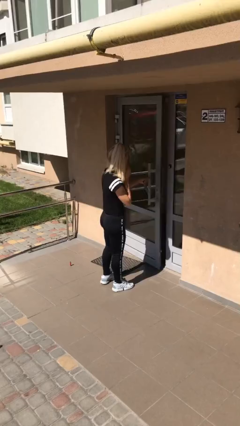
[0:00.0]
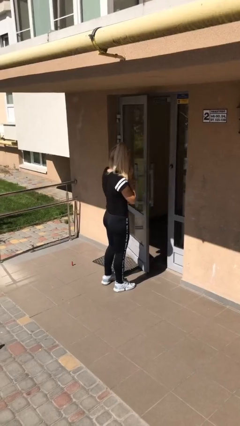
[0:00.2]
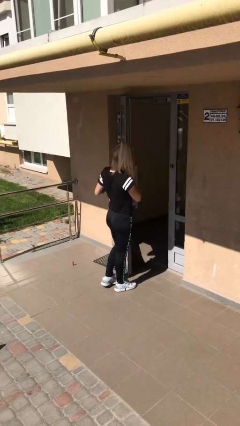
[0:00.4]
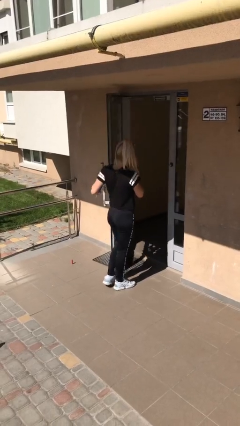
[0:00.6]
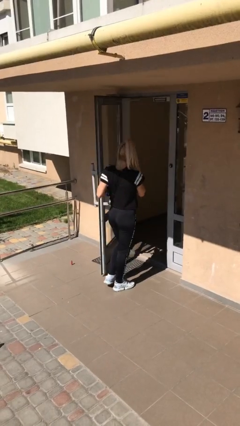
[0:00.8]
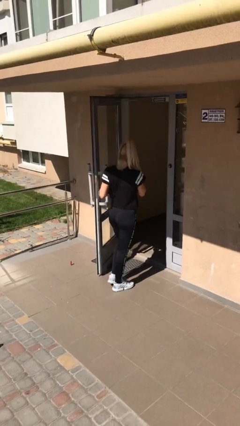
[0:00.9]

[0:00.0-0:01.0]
person opens facility door

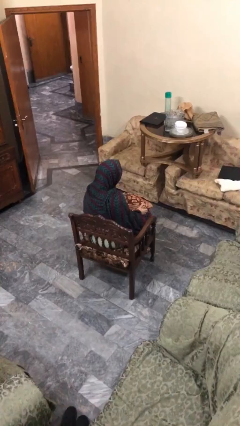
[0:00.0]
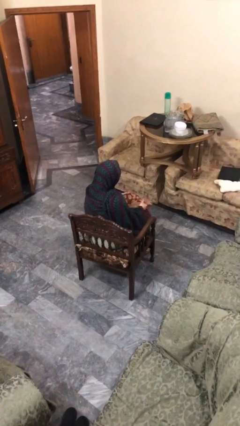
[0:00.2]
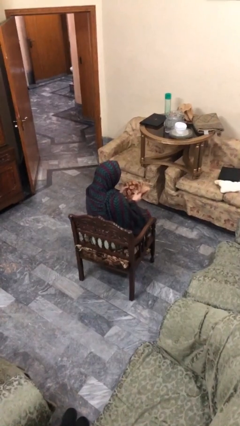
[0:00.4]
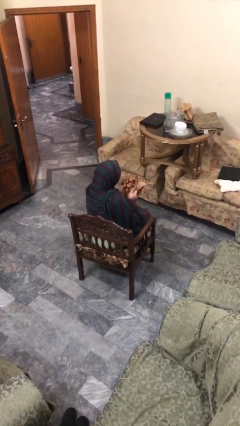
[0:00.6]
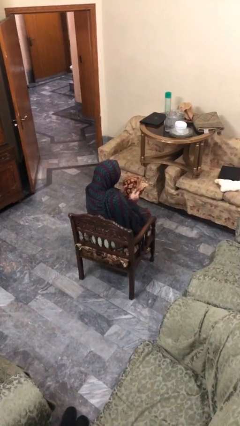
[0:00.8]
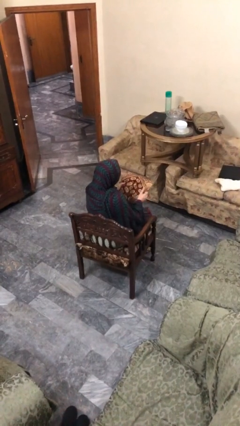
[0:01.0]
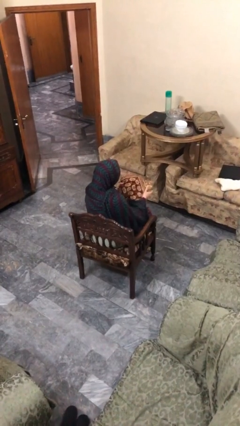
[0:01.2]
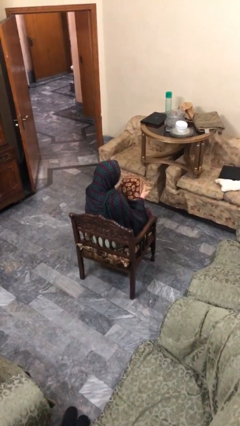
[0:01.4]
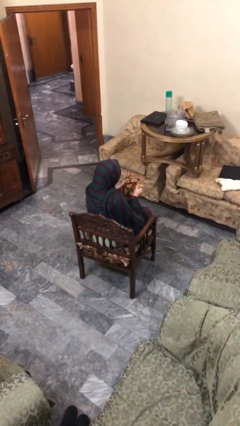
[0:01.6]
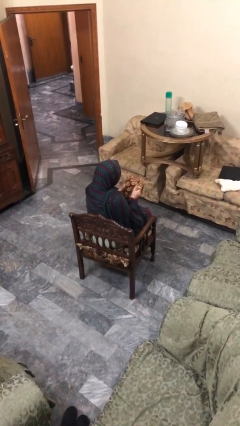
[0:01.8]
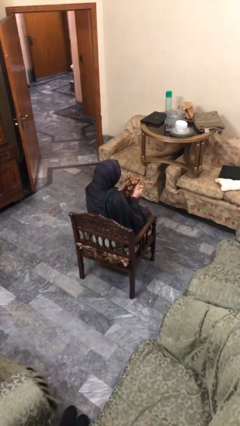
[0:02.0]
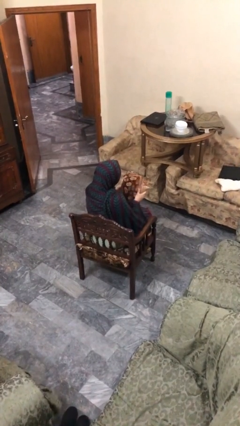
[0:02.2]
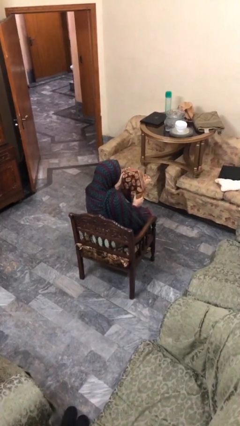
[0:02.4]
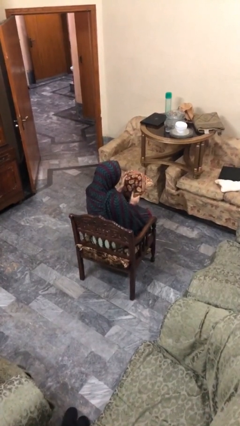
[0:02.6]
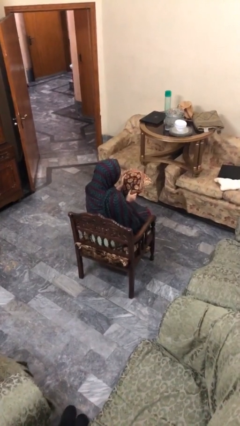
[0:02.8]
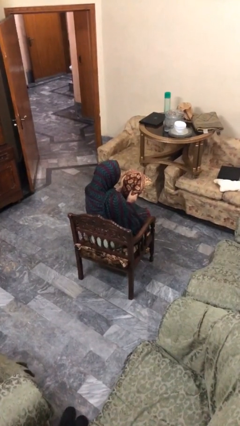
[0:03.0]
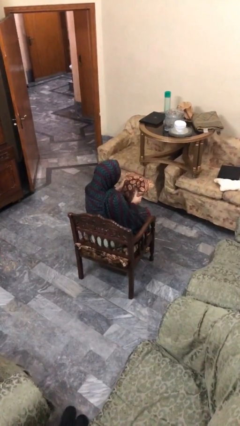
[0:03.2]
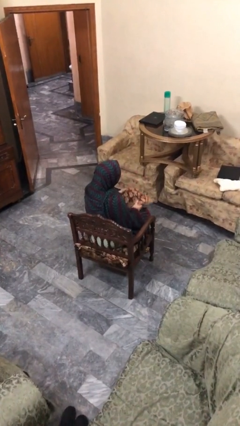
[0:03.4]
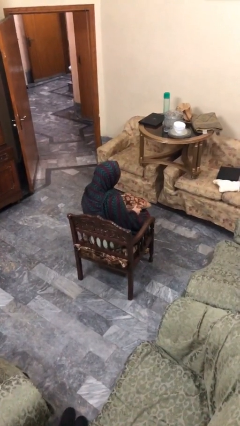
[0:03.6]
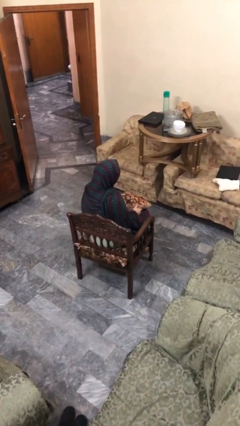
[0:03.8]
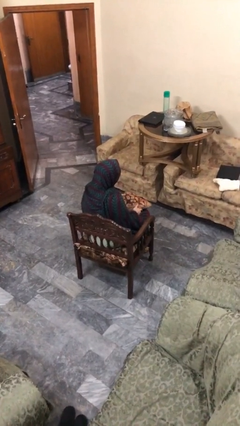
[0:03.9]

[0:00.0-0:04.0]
person squeezes object

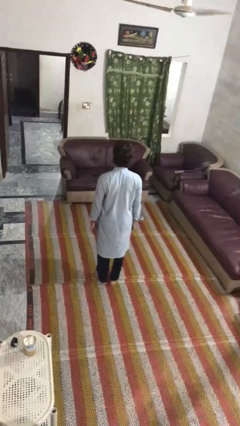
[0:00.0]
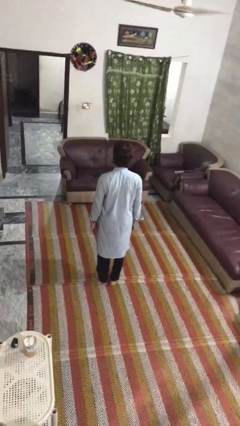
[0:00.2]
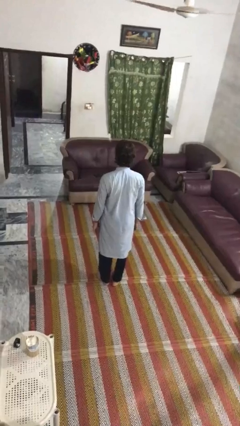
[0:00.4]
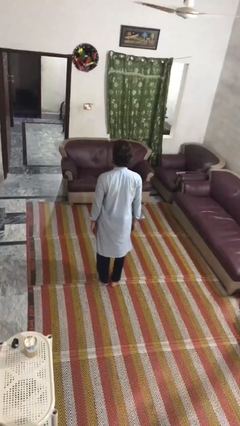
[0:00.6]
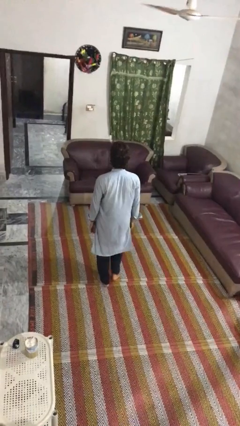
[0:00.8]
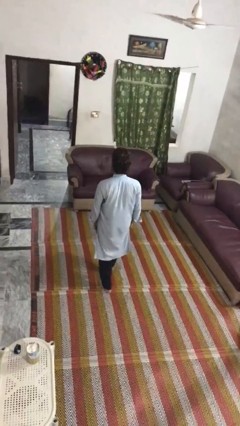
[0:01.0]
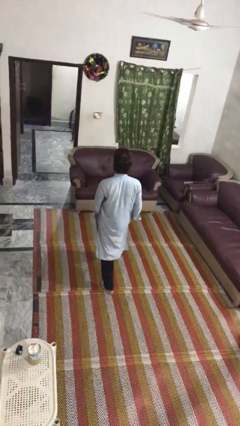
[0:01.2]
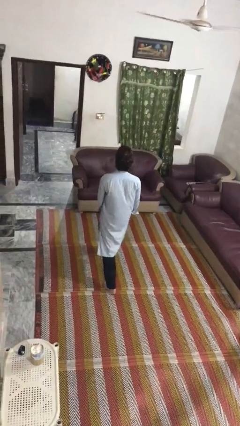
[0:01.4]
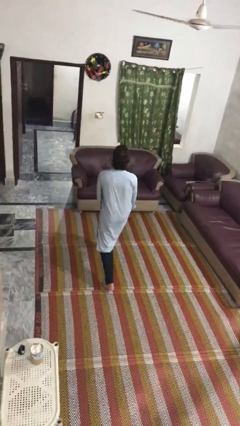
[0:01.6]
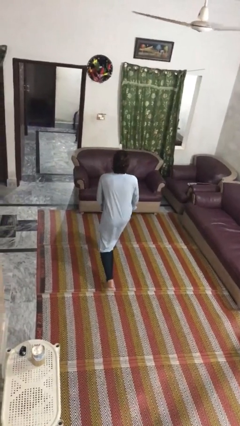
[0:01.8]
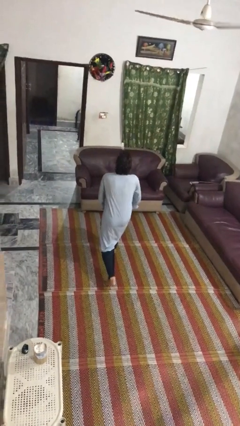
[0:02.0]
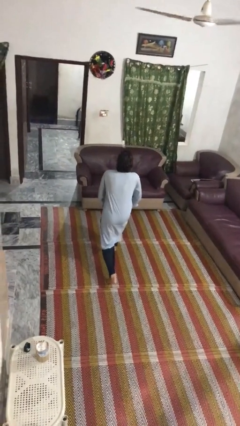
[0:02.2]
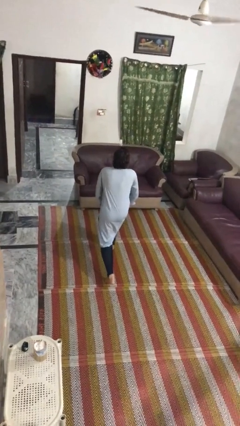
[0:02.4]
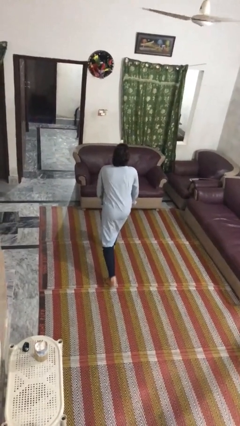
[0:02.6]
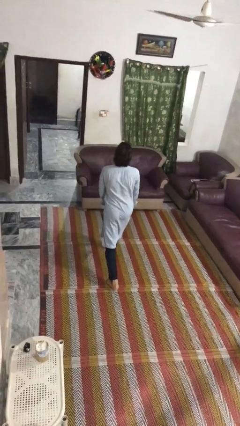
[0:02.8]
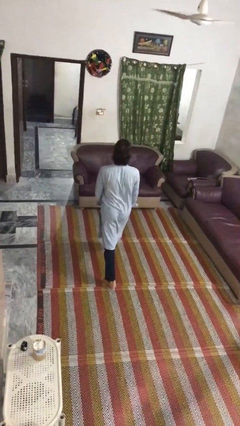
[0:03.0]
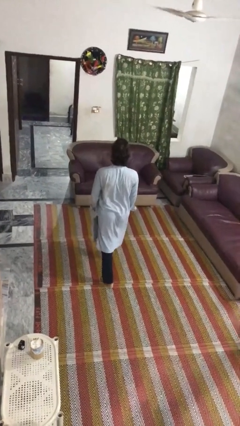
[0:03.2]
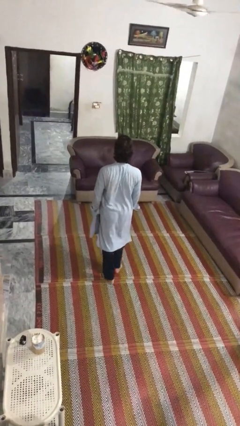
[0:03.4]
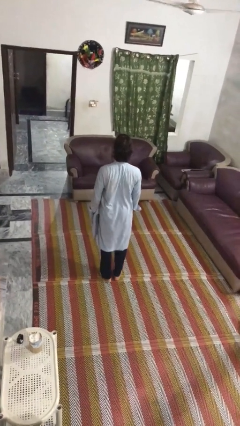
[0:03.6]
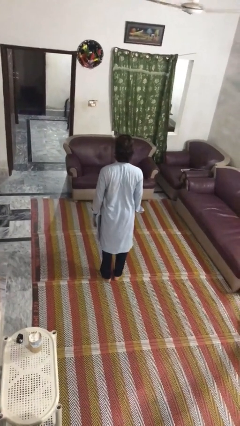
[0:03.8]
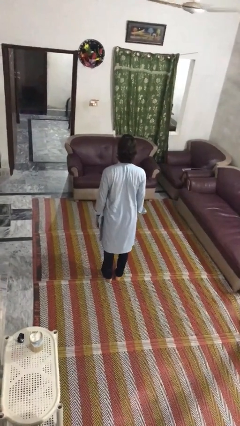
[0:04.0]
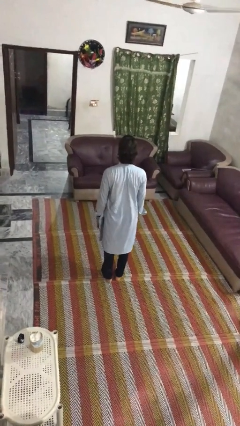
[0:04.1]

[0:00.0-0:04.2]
person exercises with lunges

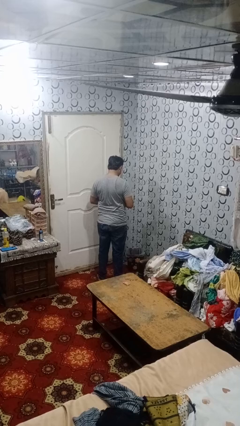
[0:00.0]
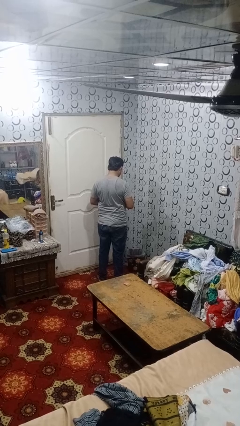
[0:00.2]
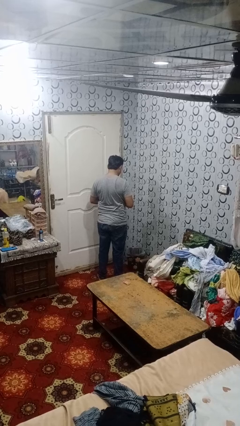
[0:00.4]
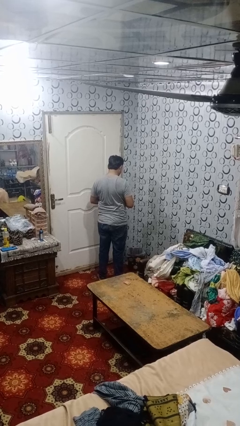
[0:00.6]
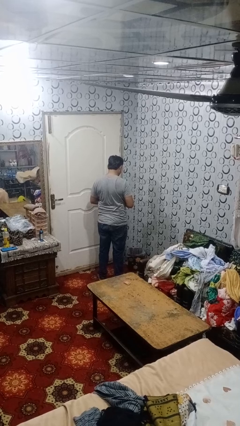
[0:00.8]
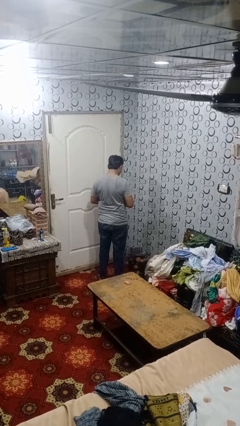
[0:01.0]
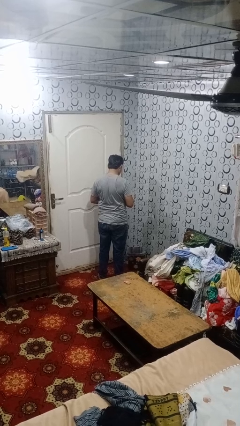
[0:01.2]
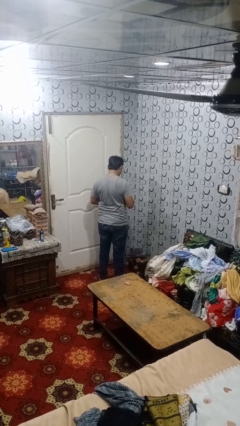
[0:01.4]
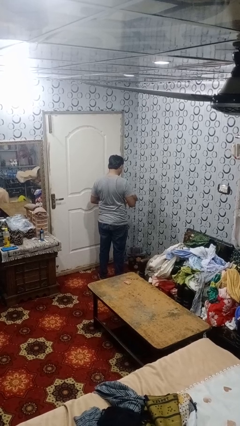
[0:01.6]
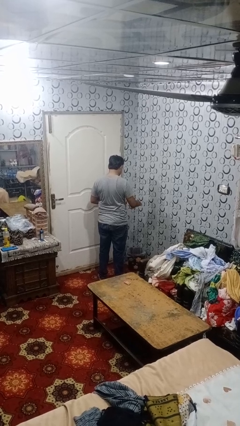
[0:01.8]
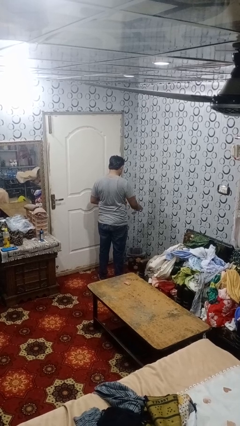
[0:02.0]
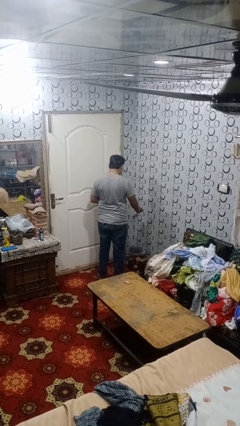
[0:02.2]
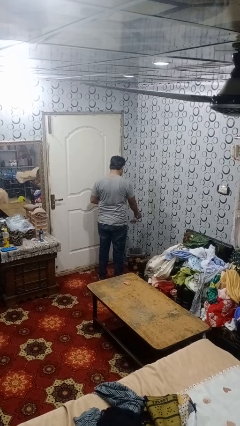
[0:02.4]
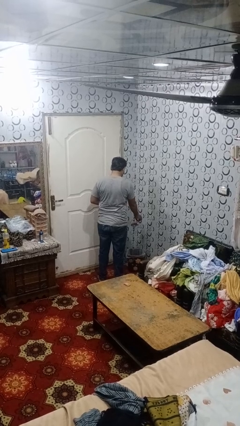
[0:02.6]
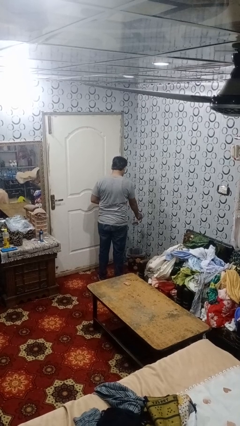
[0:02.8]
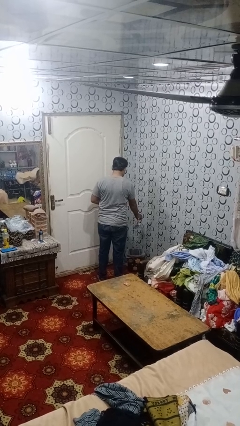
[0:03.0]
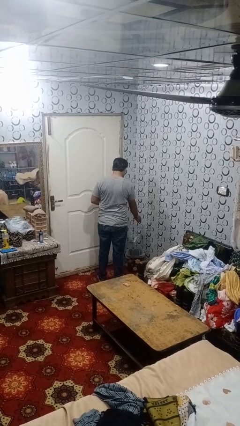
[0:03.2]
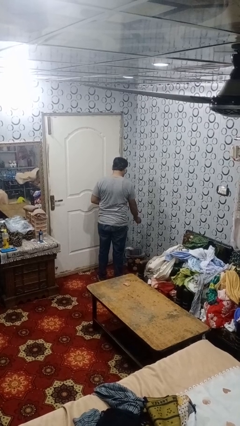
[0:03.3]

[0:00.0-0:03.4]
person discards trash

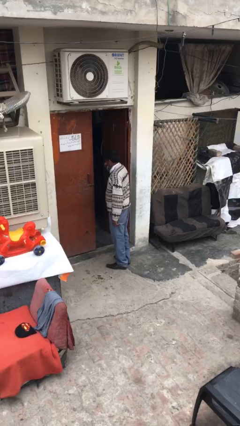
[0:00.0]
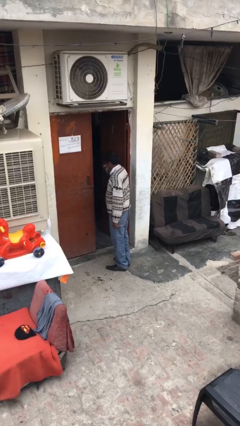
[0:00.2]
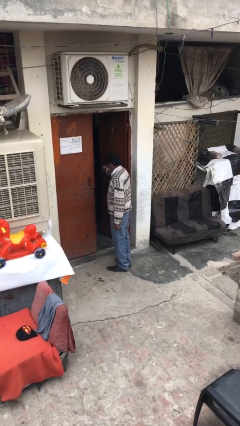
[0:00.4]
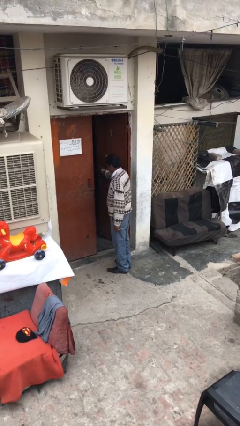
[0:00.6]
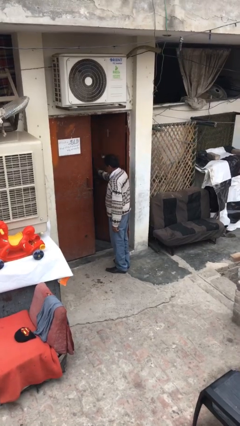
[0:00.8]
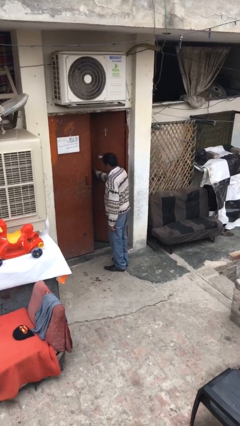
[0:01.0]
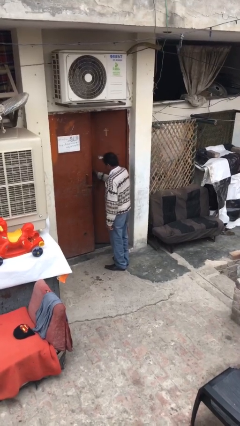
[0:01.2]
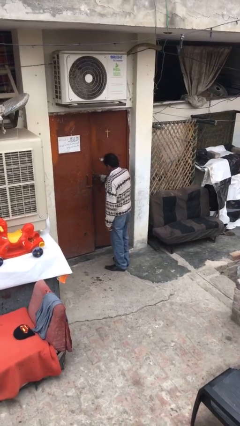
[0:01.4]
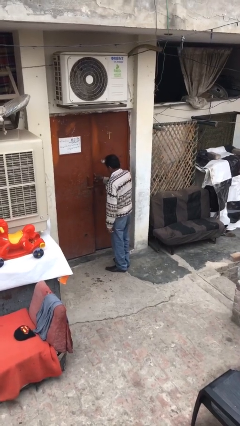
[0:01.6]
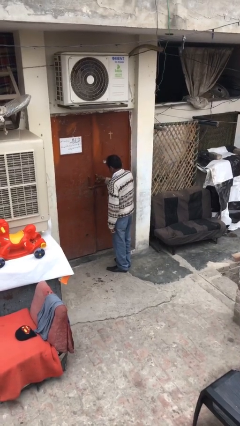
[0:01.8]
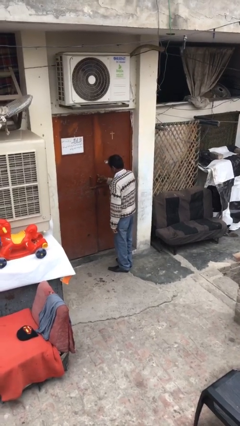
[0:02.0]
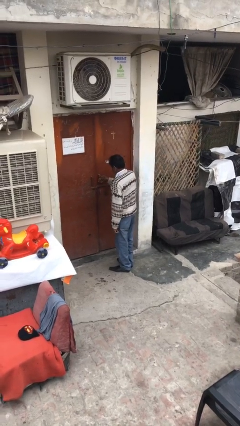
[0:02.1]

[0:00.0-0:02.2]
person closes facility door

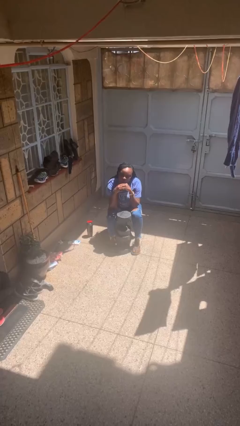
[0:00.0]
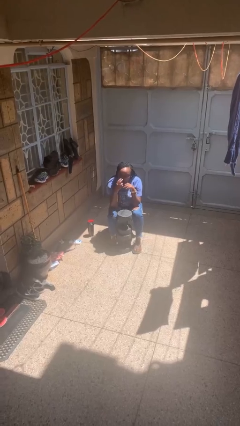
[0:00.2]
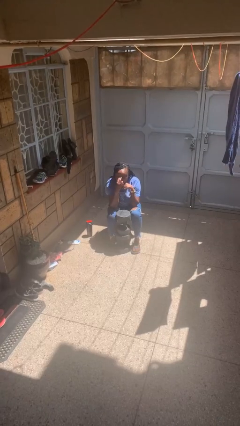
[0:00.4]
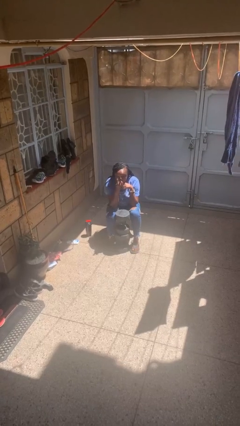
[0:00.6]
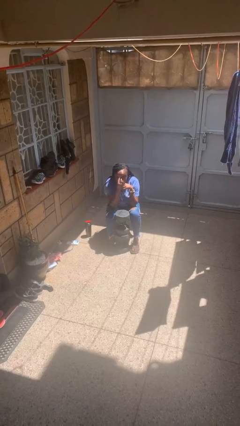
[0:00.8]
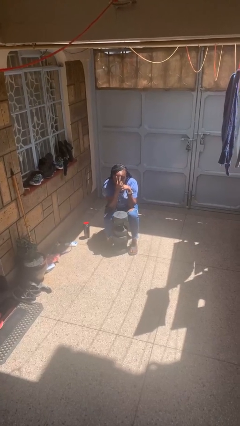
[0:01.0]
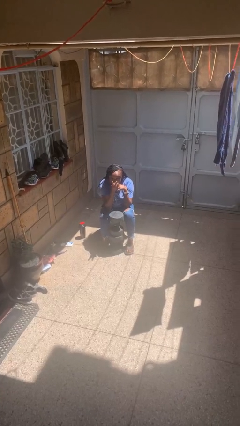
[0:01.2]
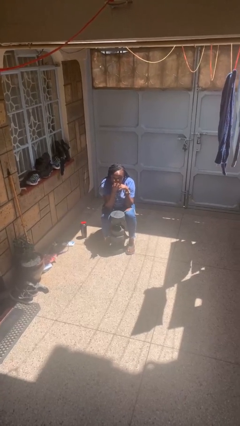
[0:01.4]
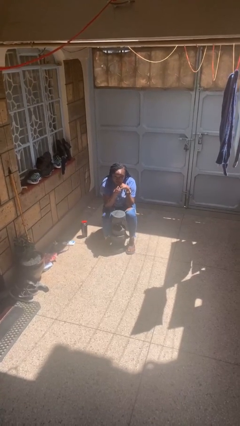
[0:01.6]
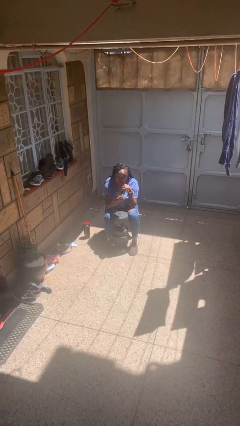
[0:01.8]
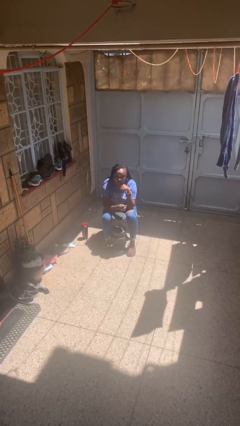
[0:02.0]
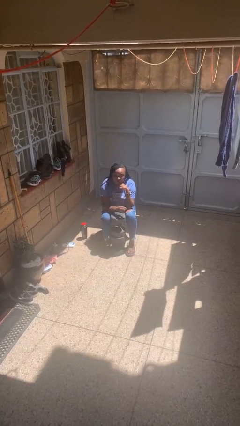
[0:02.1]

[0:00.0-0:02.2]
person gestures watch closely

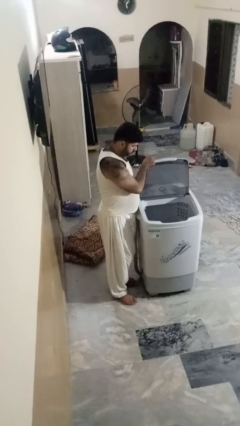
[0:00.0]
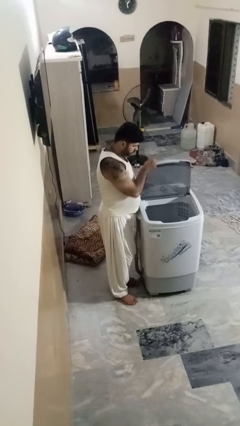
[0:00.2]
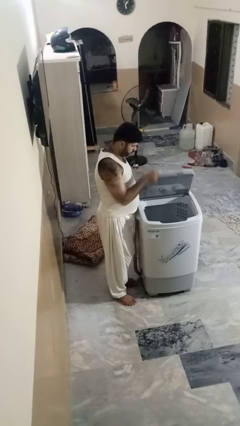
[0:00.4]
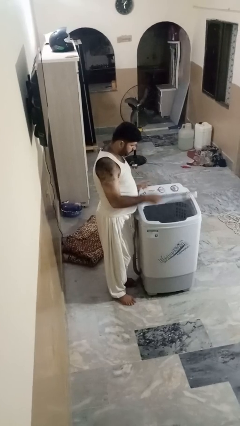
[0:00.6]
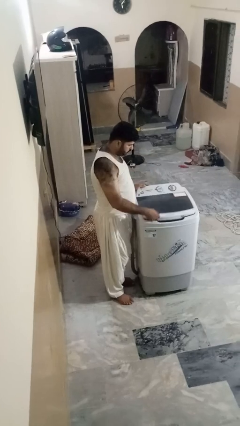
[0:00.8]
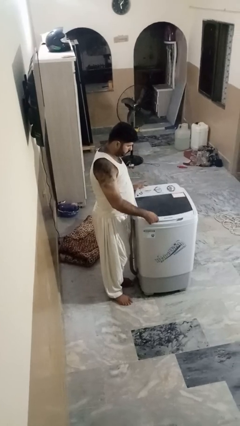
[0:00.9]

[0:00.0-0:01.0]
person closes clothes washer
